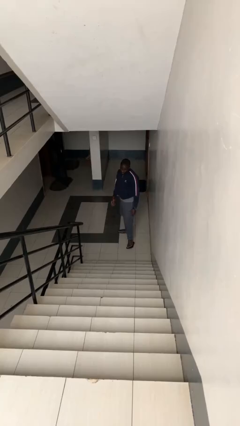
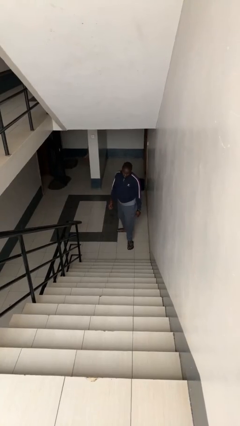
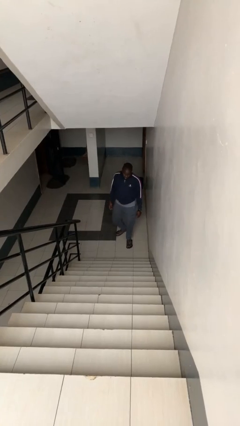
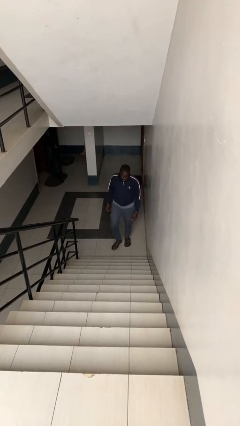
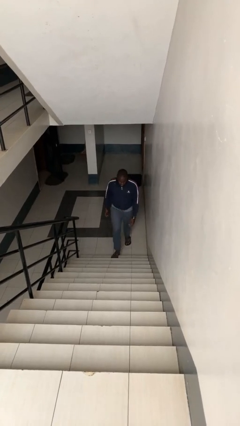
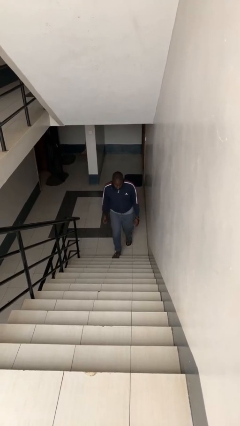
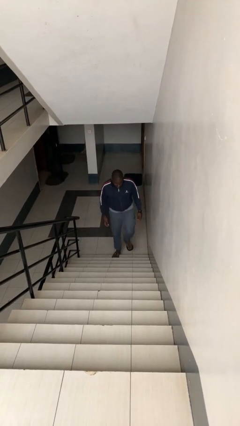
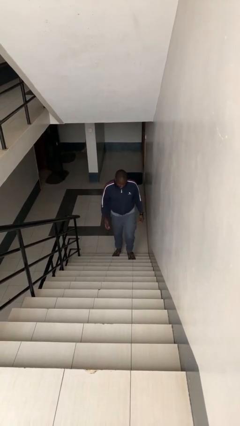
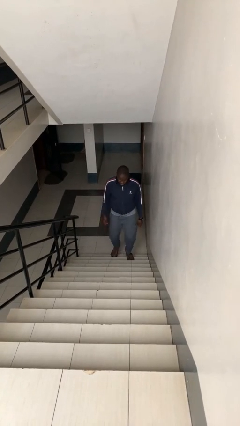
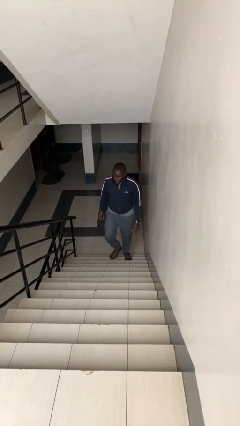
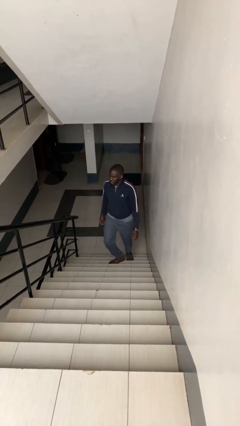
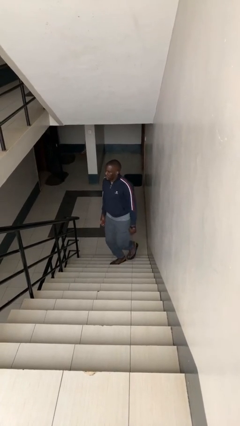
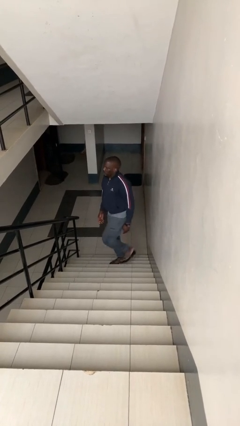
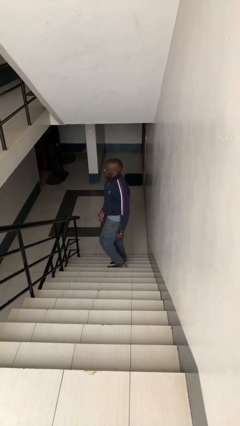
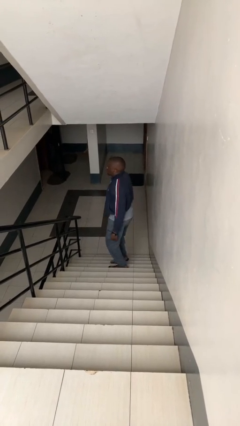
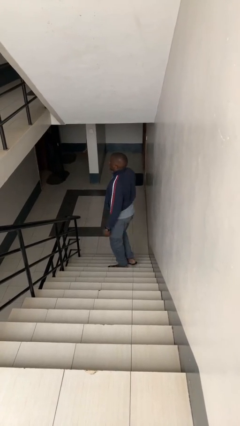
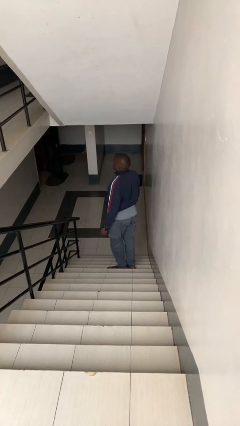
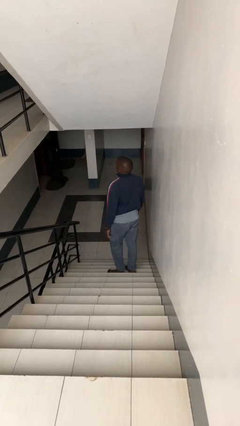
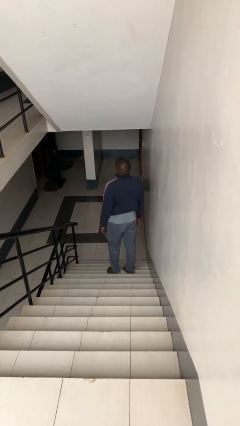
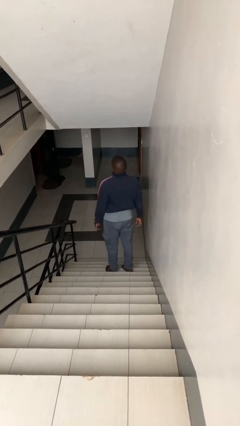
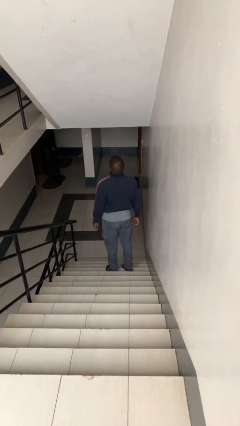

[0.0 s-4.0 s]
person climbs up stairs

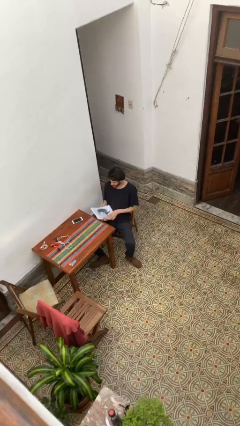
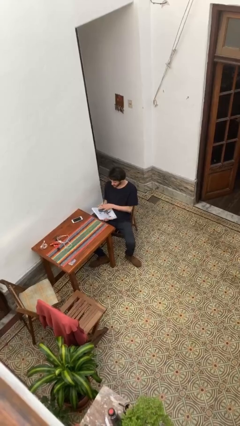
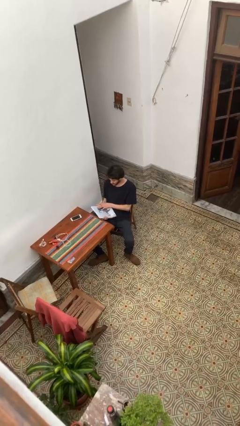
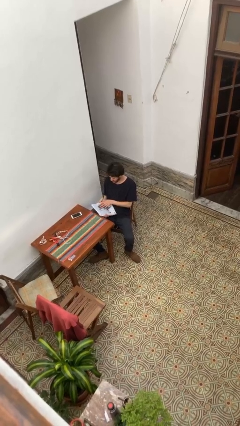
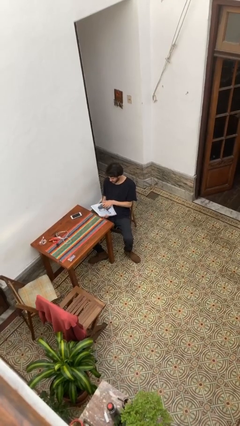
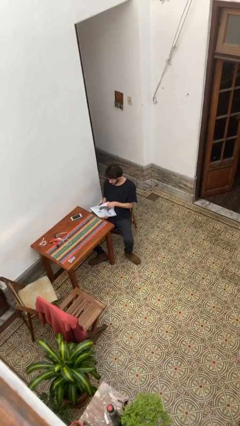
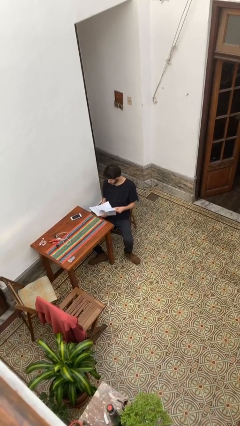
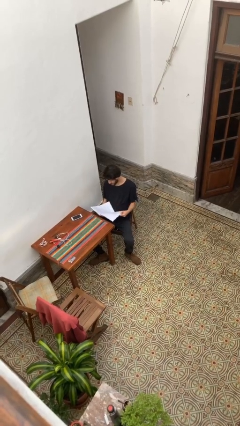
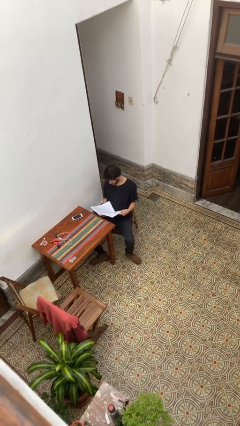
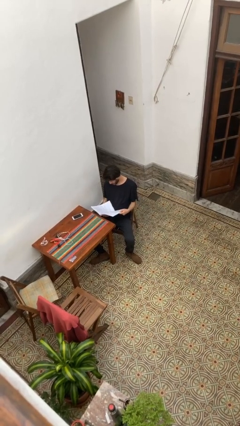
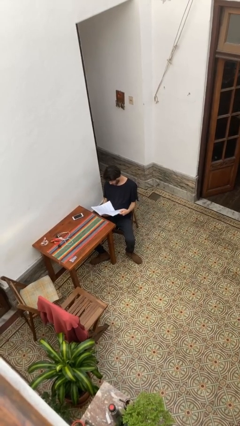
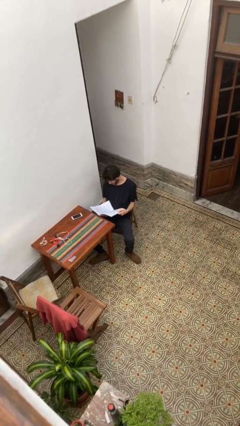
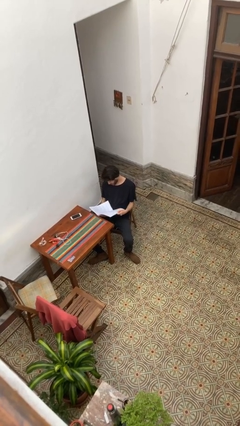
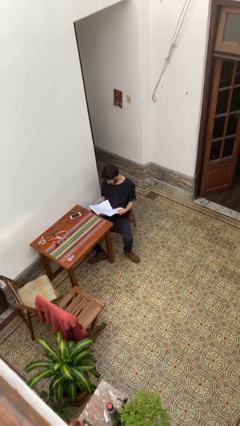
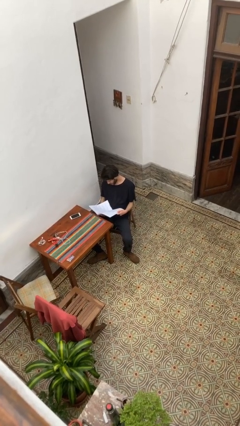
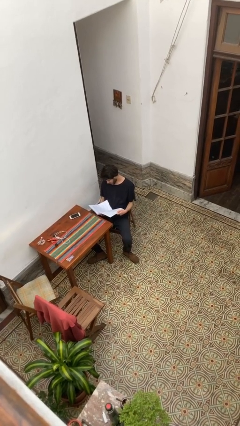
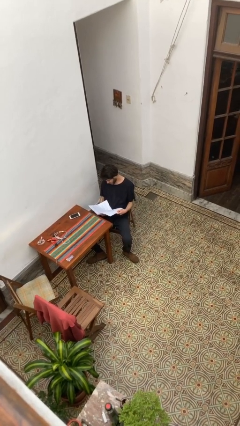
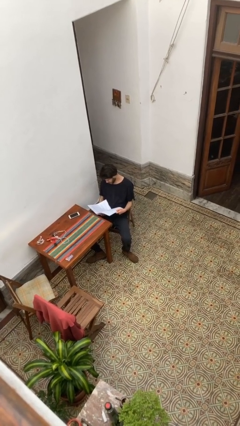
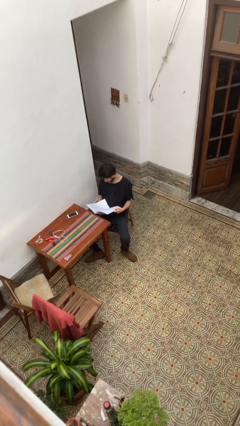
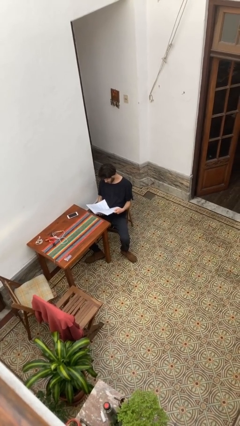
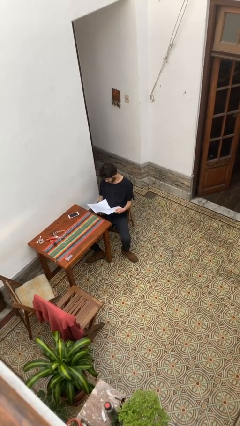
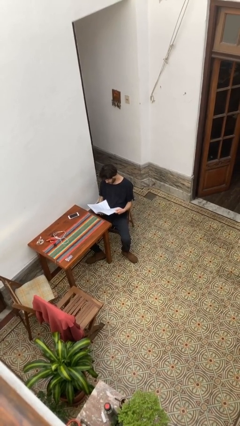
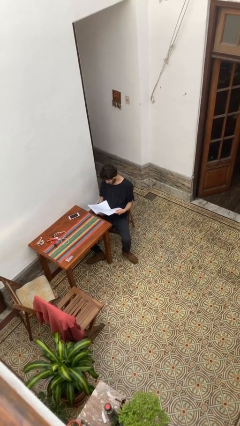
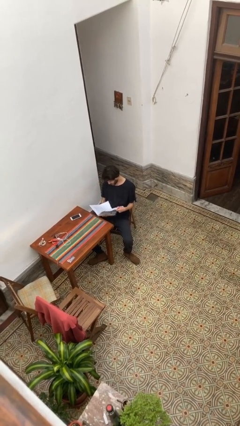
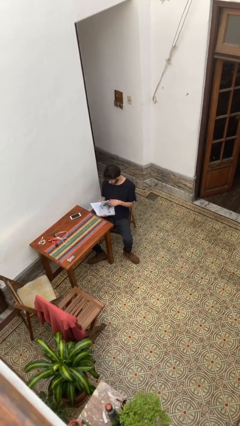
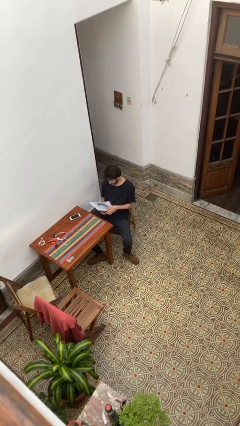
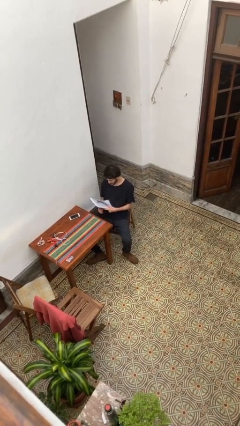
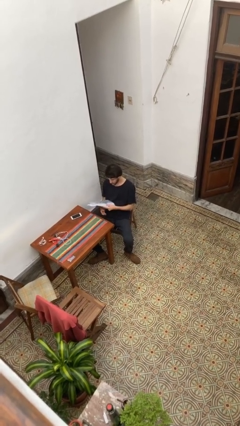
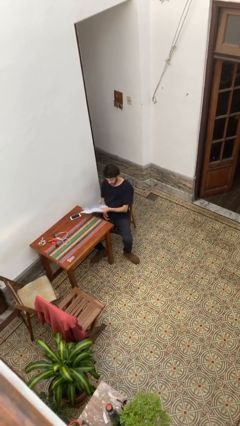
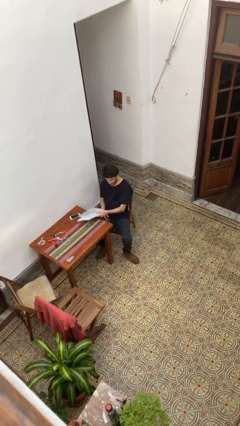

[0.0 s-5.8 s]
person reads document

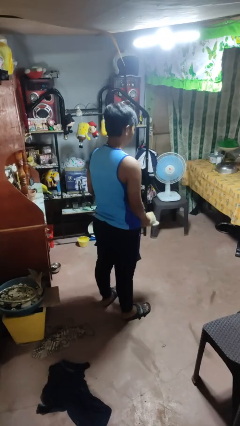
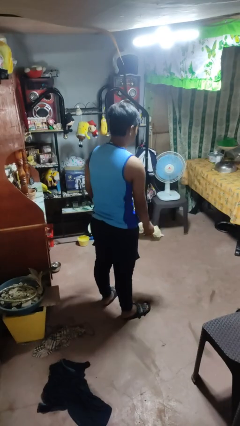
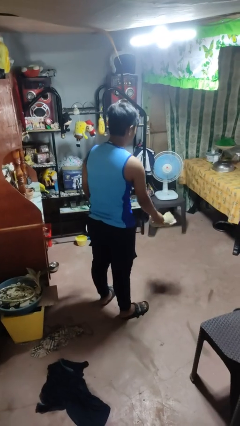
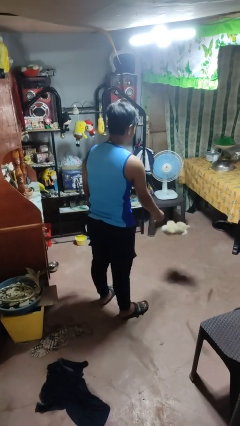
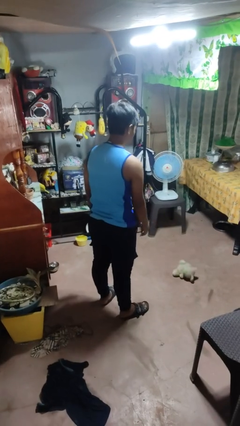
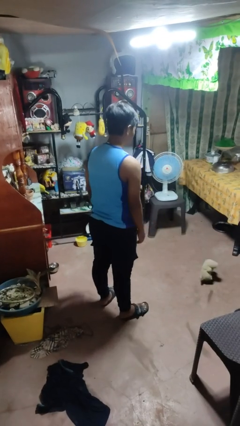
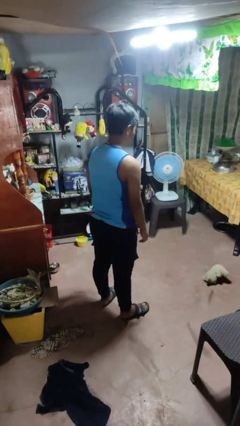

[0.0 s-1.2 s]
person throws object to ground

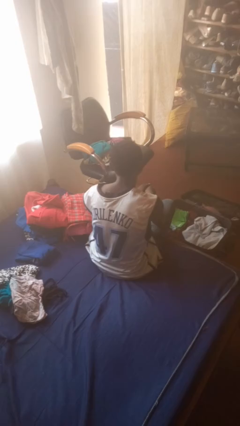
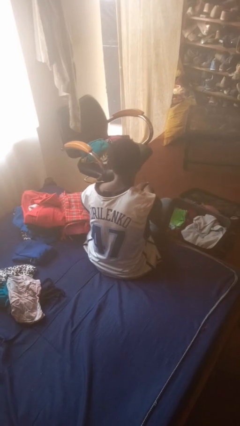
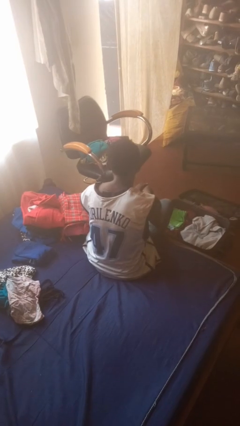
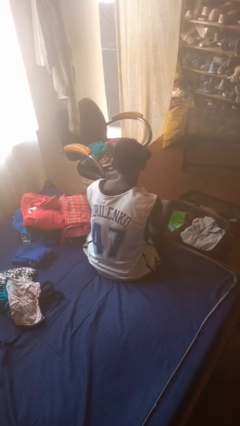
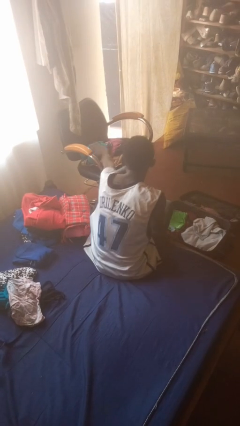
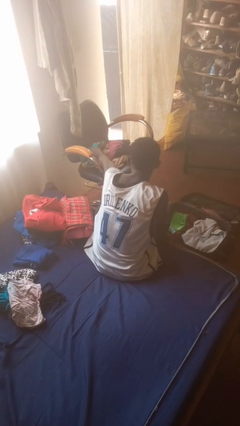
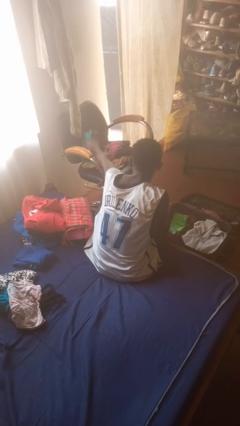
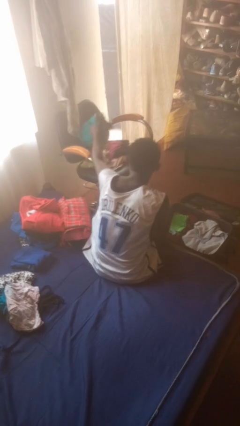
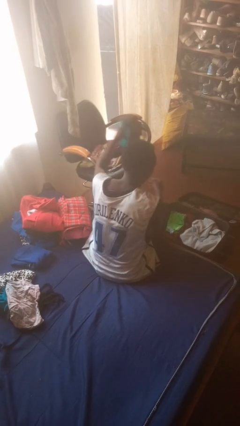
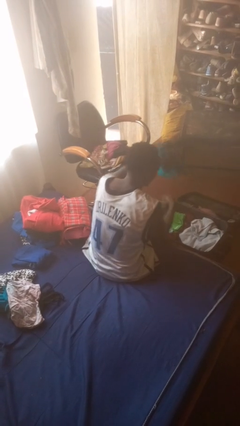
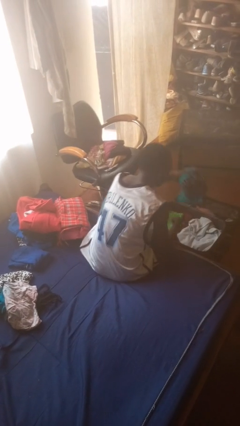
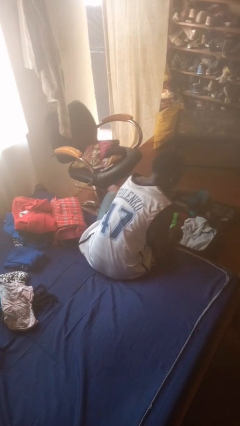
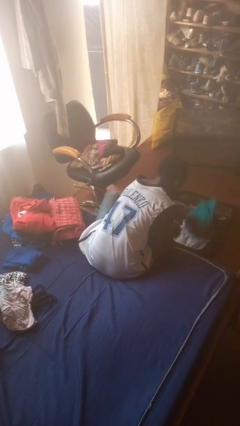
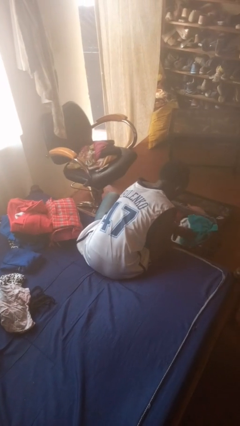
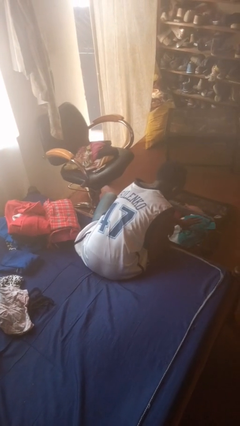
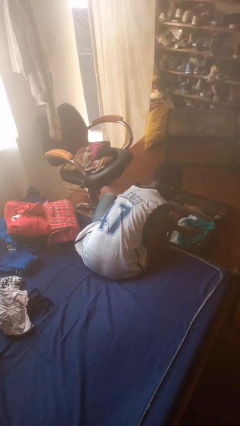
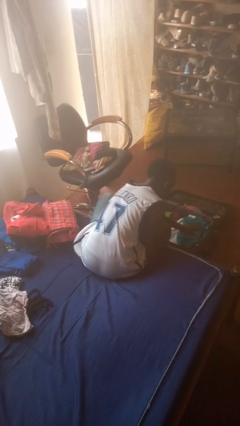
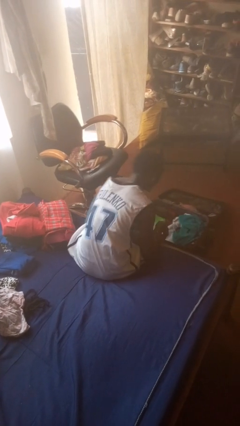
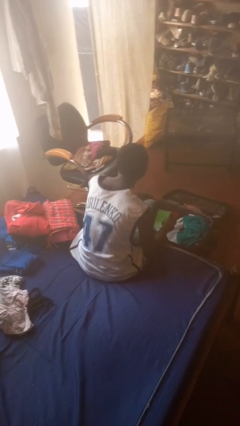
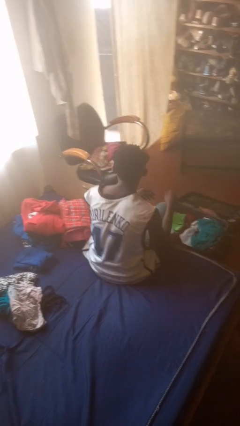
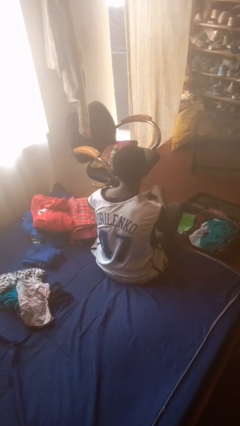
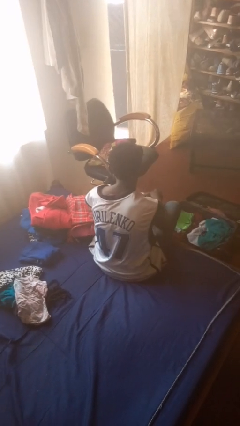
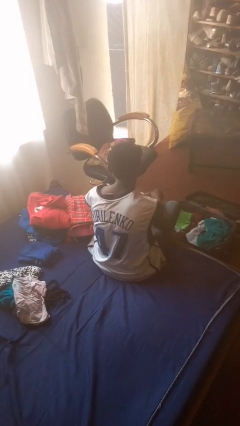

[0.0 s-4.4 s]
person loads clothes into suitcase

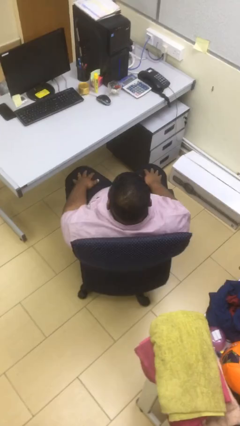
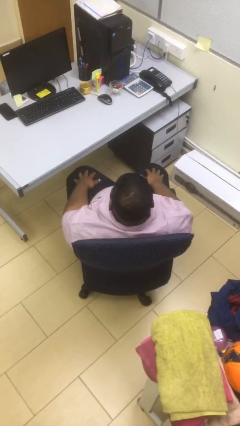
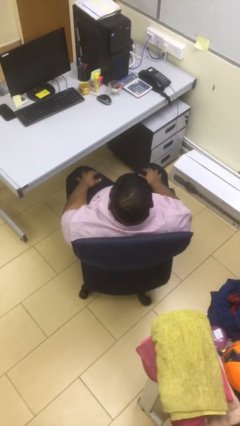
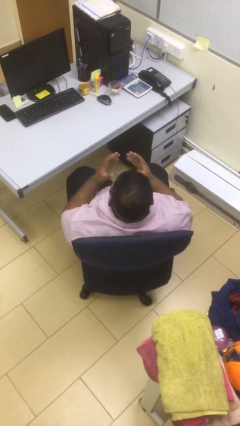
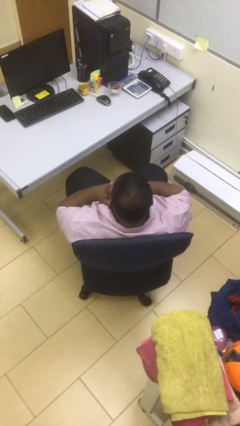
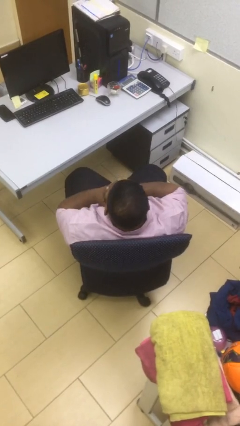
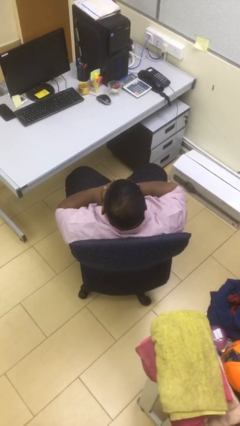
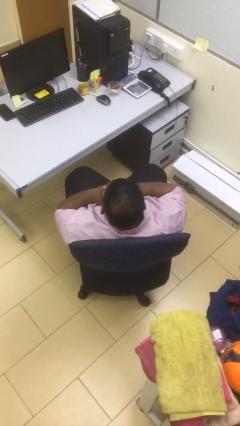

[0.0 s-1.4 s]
person covers face with hands

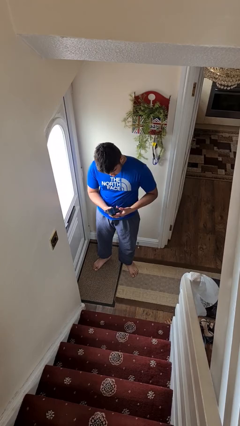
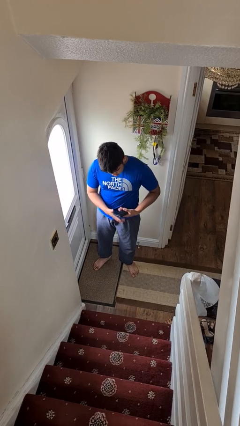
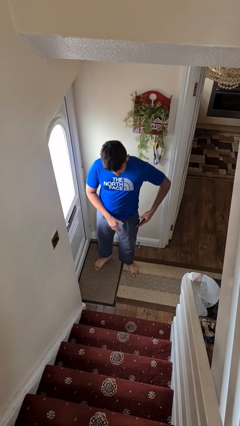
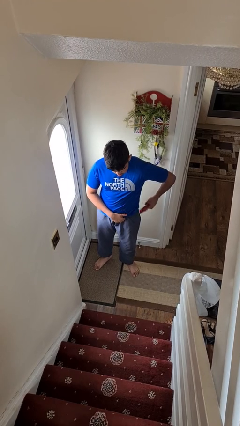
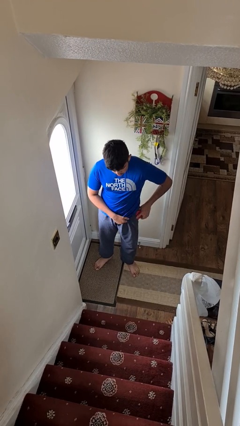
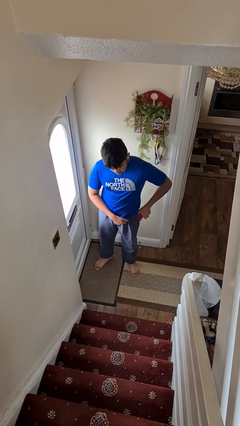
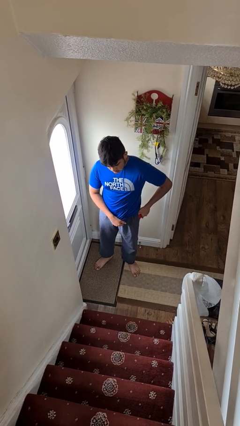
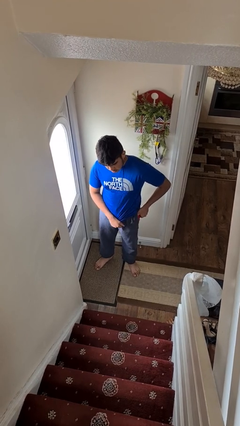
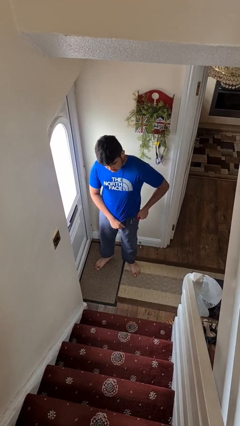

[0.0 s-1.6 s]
person puts phone into pocket
